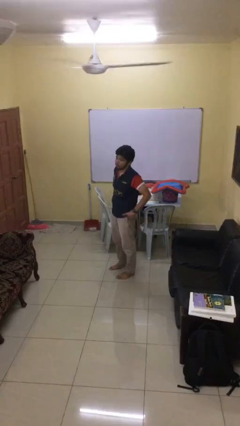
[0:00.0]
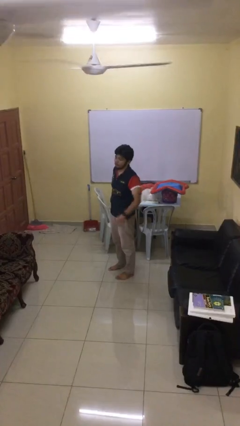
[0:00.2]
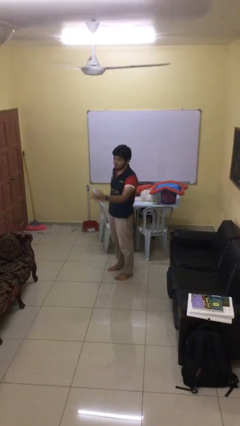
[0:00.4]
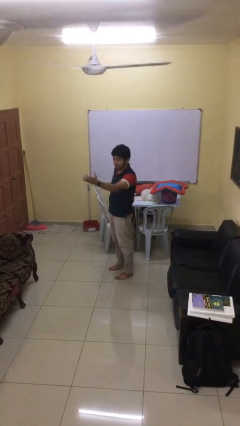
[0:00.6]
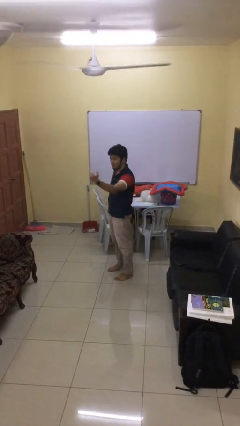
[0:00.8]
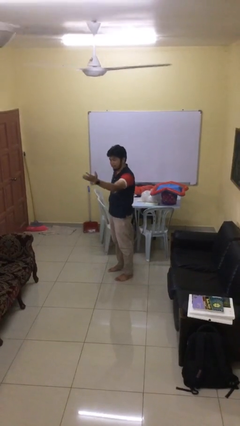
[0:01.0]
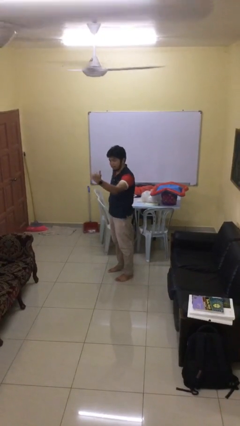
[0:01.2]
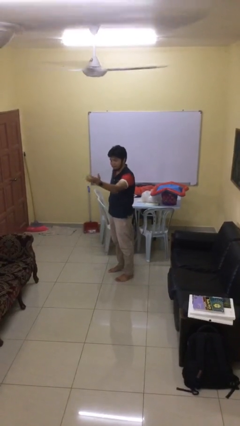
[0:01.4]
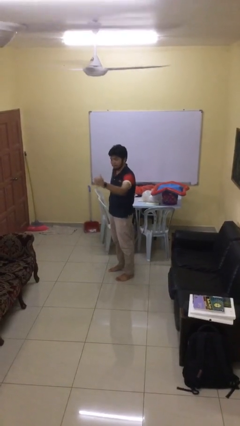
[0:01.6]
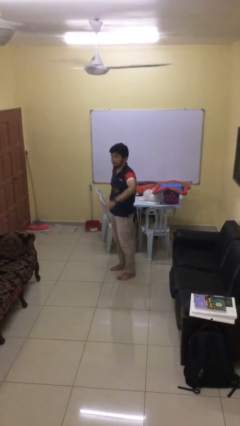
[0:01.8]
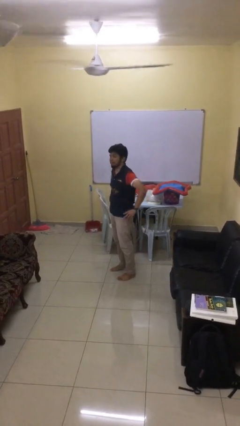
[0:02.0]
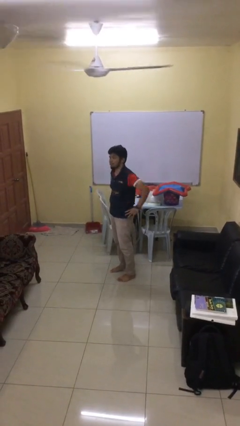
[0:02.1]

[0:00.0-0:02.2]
person gestures come here

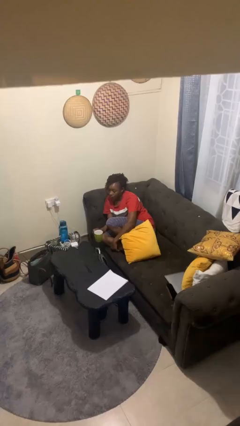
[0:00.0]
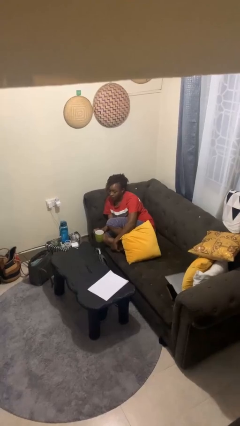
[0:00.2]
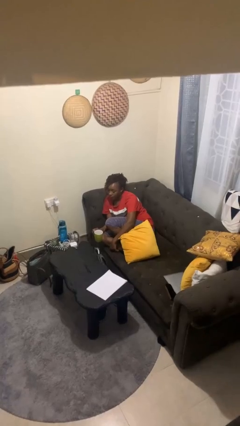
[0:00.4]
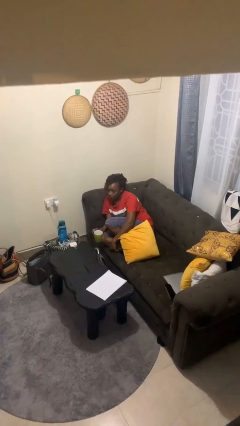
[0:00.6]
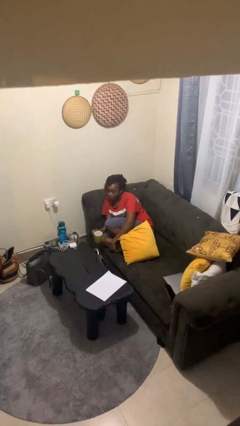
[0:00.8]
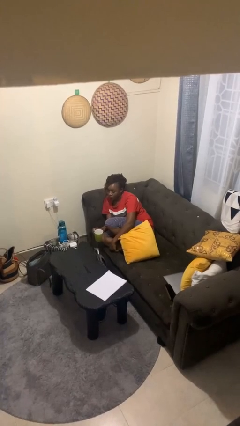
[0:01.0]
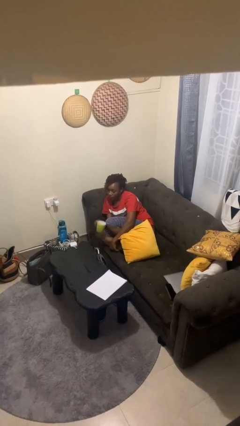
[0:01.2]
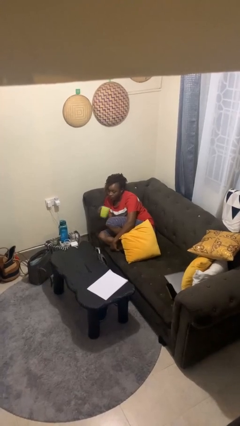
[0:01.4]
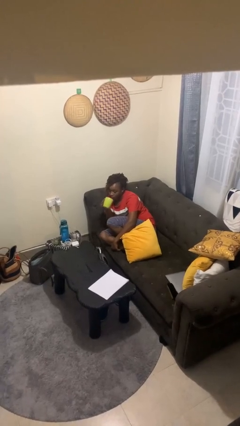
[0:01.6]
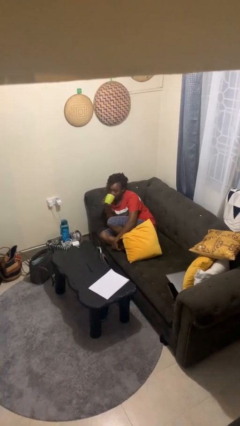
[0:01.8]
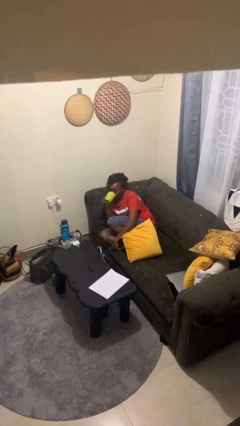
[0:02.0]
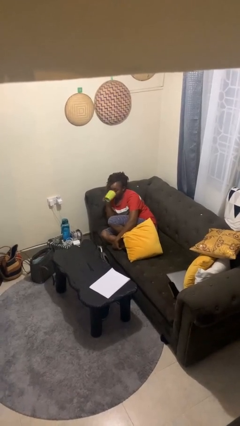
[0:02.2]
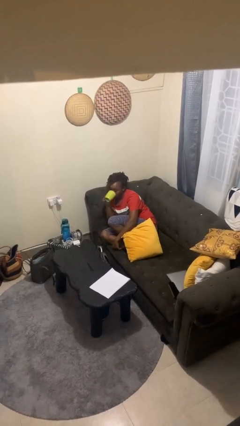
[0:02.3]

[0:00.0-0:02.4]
person drinks from mug

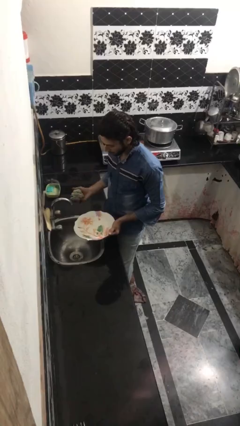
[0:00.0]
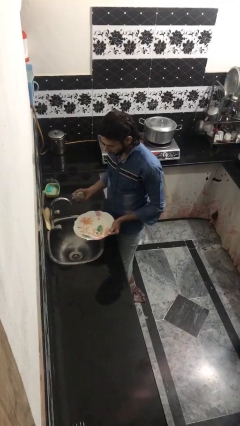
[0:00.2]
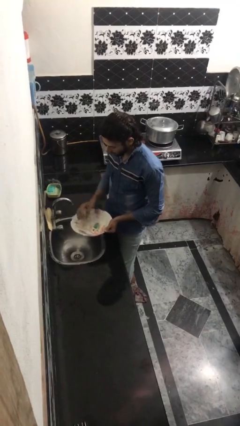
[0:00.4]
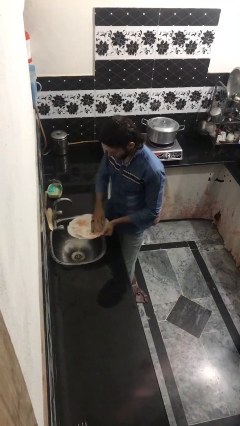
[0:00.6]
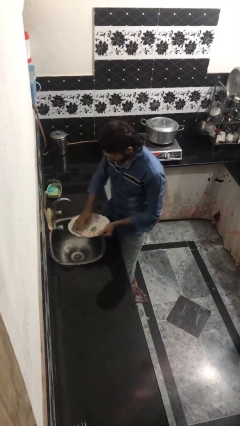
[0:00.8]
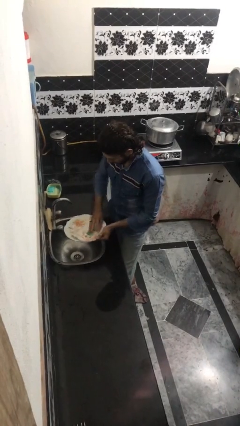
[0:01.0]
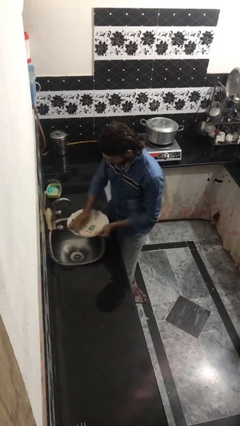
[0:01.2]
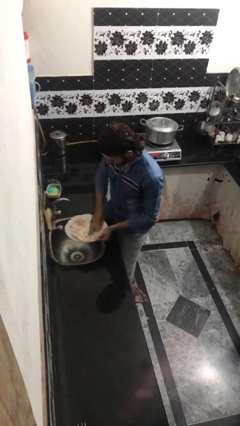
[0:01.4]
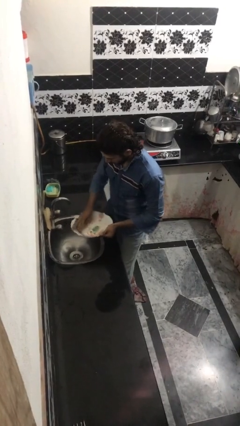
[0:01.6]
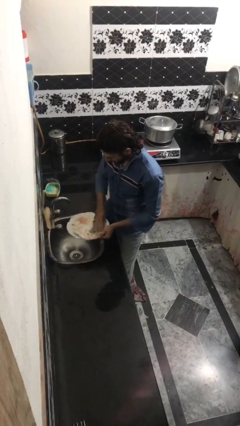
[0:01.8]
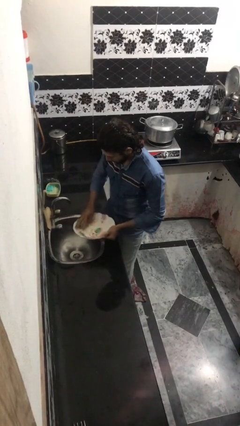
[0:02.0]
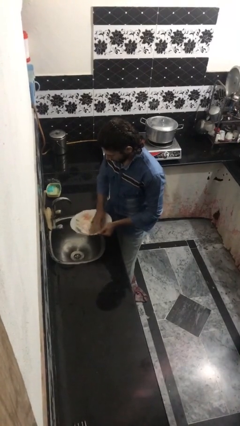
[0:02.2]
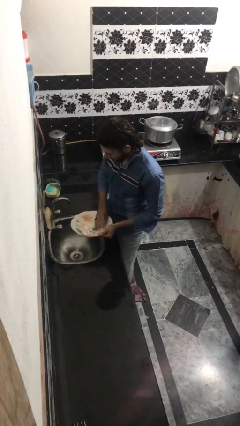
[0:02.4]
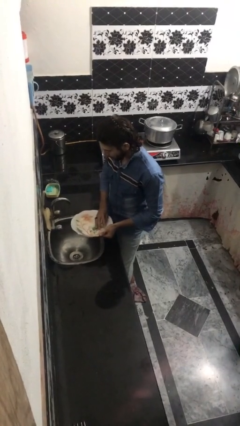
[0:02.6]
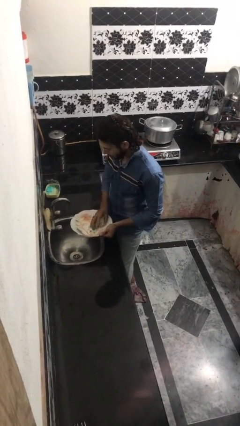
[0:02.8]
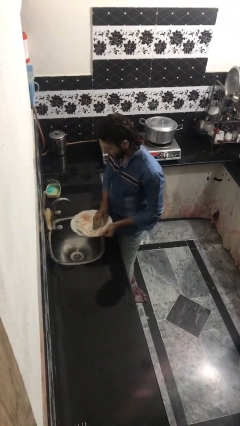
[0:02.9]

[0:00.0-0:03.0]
person washes dish

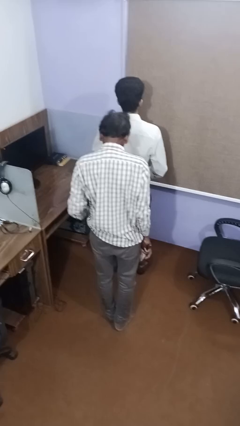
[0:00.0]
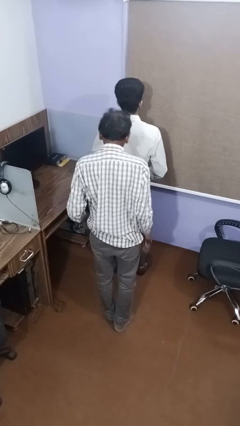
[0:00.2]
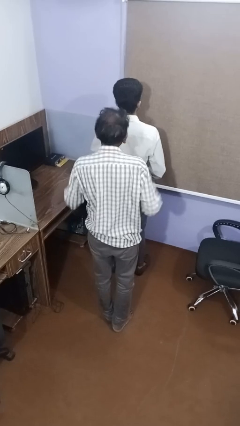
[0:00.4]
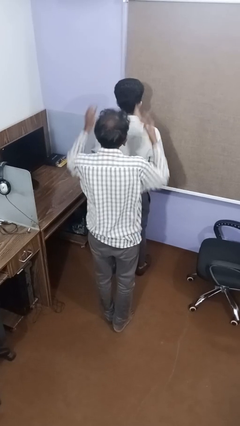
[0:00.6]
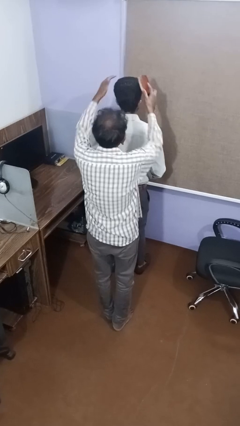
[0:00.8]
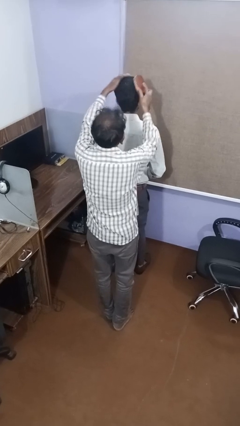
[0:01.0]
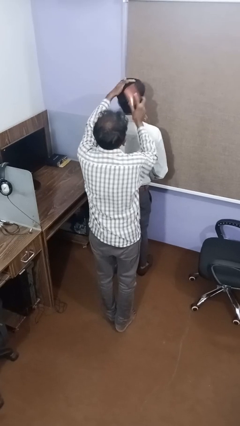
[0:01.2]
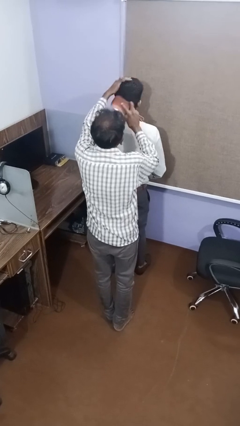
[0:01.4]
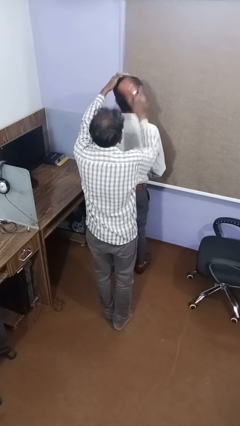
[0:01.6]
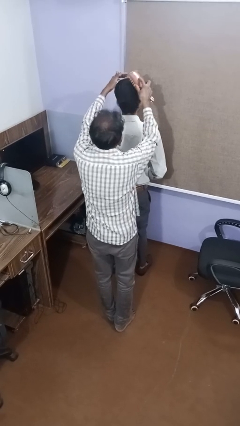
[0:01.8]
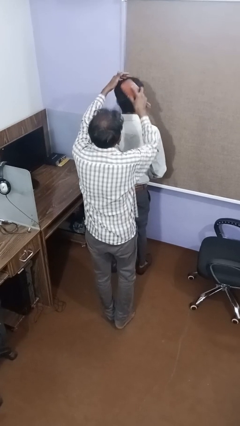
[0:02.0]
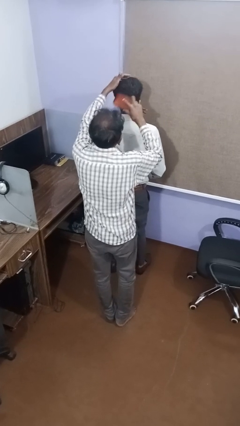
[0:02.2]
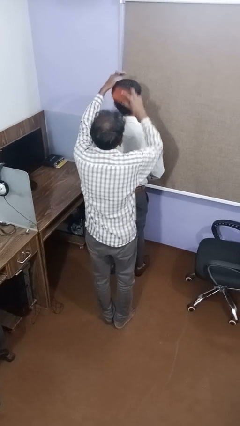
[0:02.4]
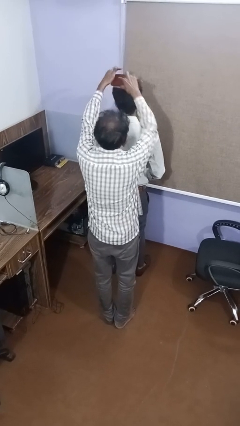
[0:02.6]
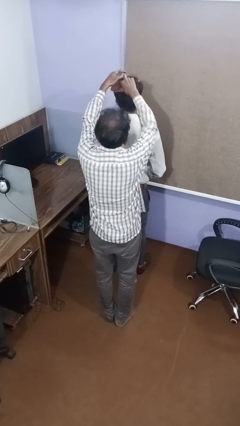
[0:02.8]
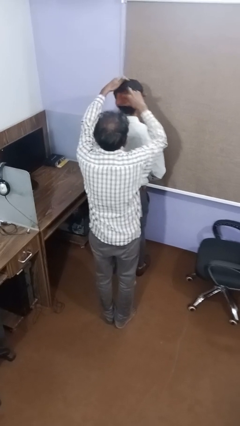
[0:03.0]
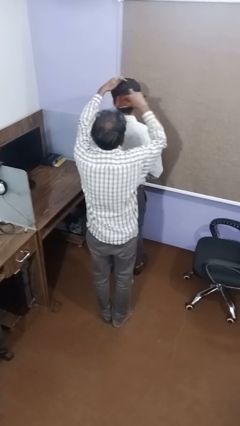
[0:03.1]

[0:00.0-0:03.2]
person brushes hair of person

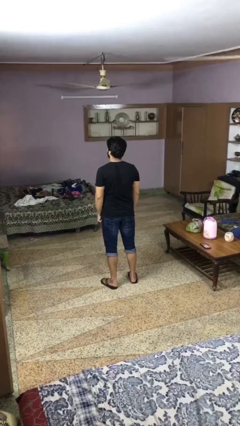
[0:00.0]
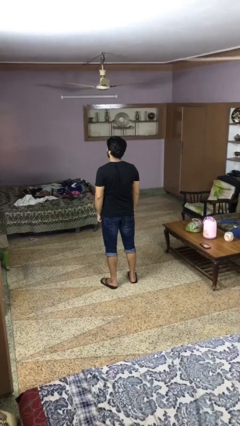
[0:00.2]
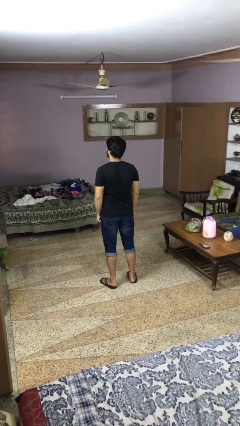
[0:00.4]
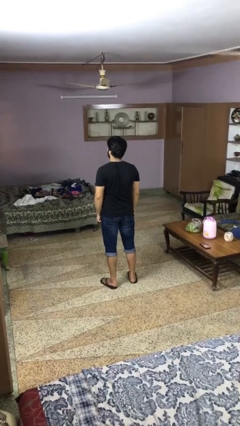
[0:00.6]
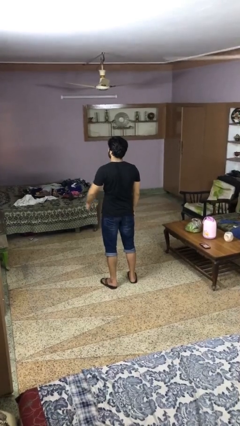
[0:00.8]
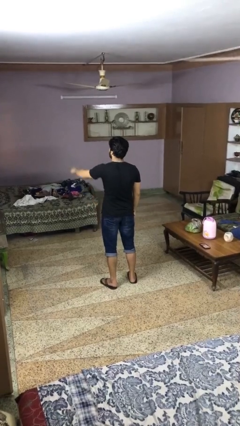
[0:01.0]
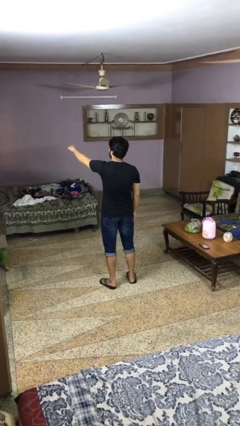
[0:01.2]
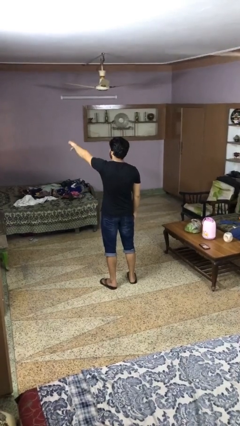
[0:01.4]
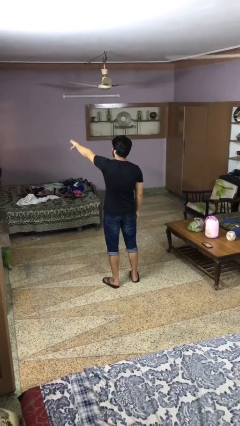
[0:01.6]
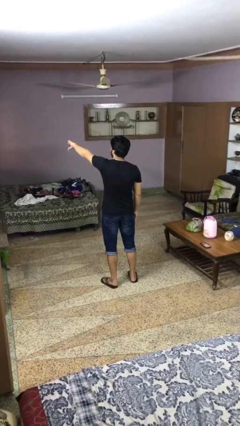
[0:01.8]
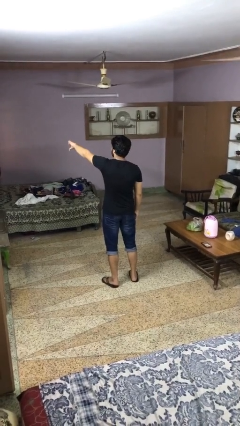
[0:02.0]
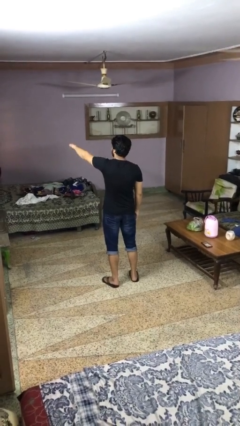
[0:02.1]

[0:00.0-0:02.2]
person gestures thumbs down

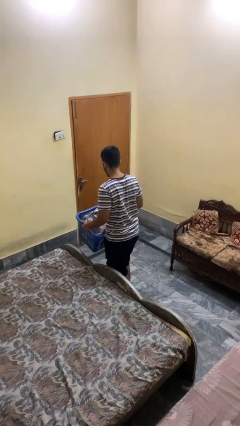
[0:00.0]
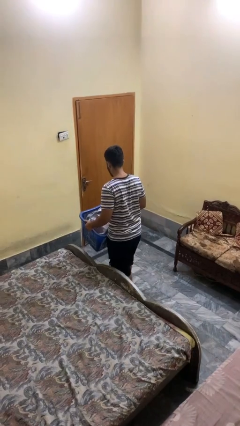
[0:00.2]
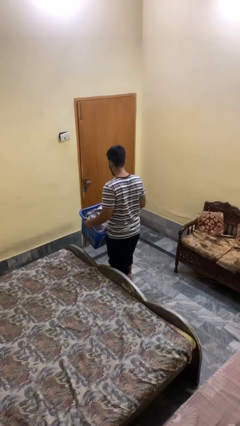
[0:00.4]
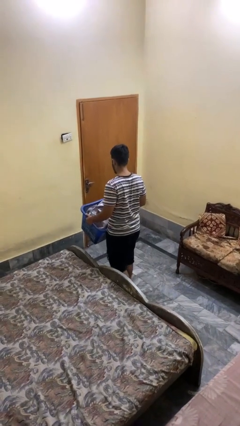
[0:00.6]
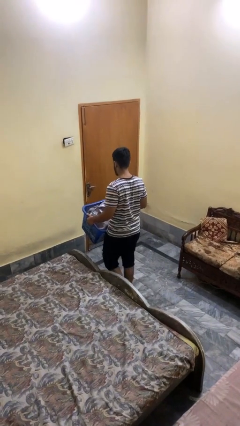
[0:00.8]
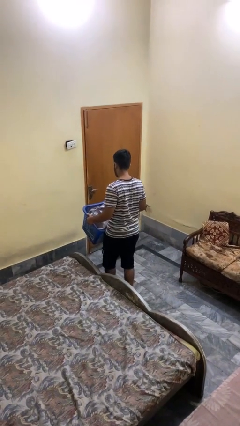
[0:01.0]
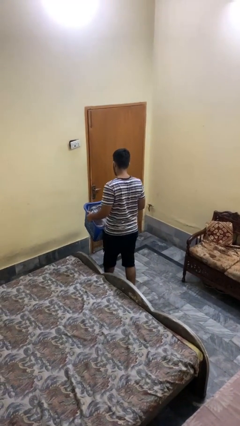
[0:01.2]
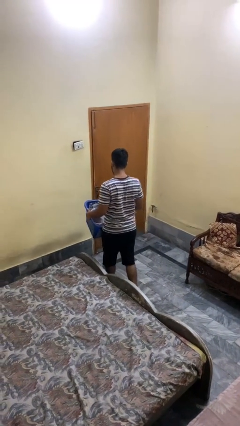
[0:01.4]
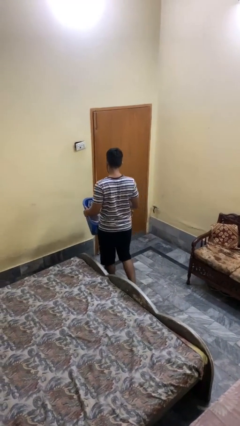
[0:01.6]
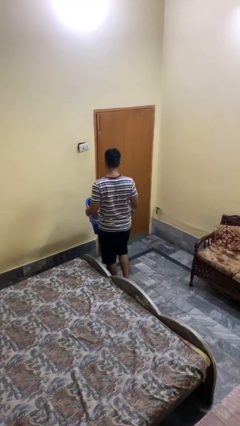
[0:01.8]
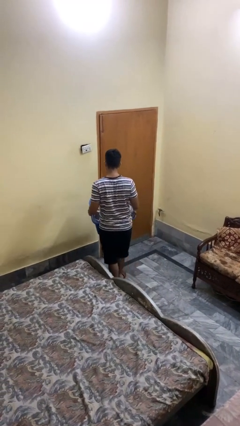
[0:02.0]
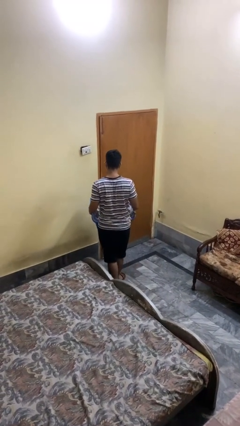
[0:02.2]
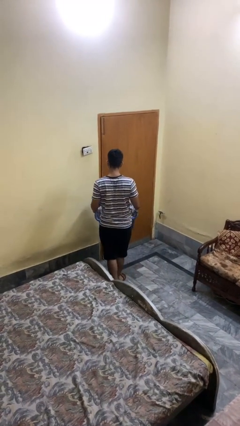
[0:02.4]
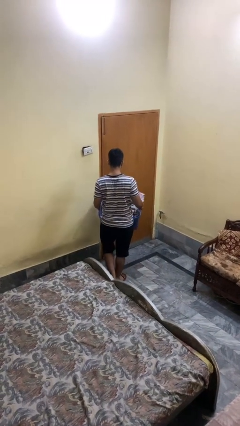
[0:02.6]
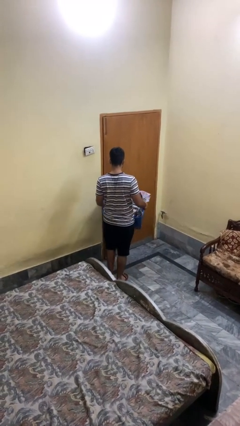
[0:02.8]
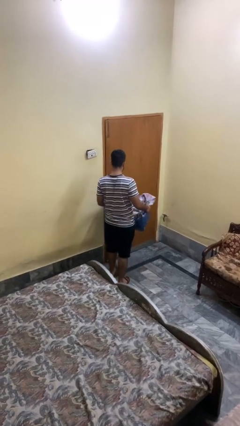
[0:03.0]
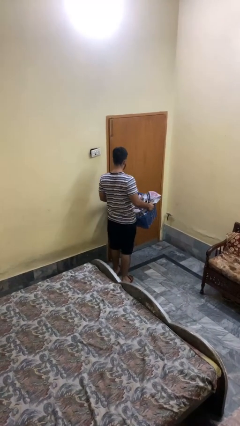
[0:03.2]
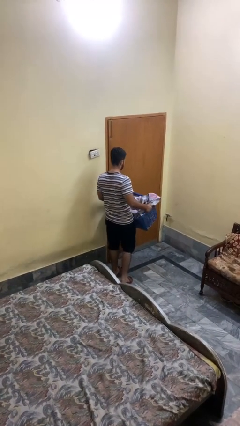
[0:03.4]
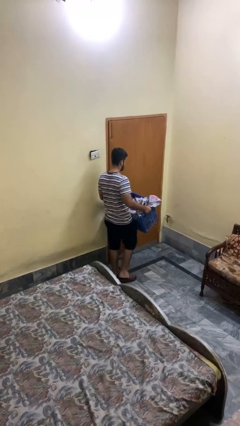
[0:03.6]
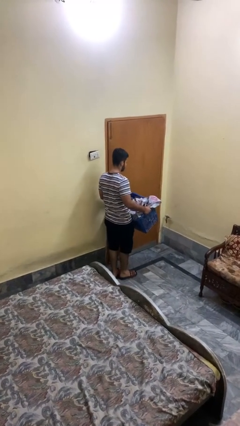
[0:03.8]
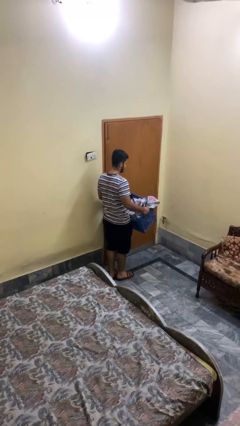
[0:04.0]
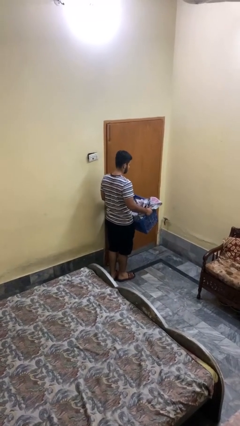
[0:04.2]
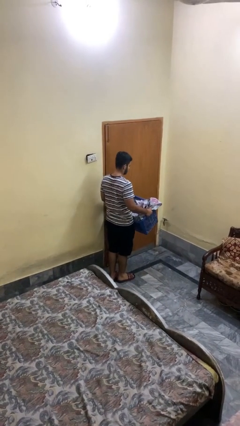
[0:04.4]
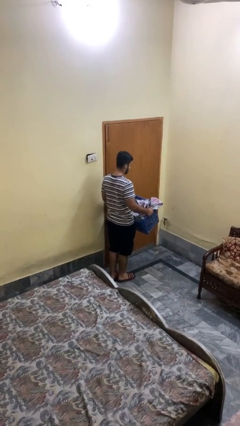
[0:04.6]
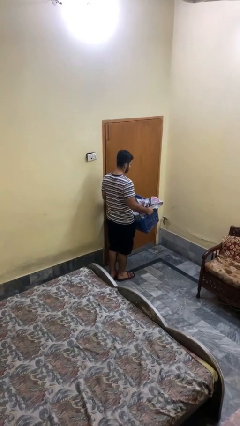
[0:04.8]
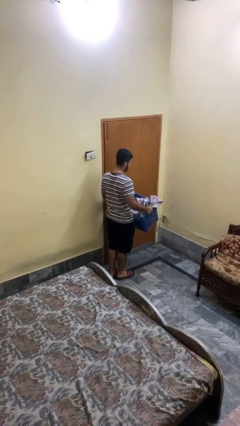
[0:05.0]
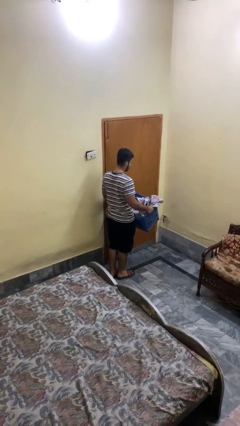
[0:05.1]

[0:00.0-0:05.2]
person carries laundry basket
